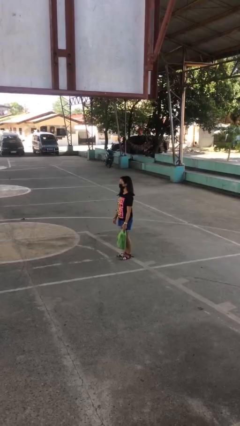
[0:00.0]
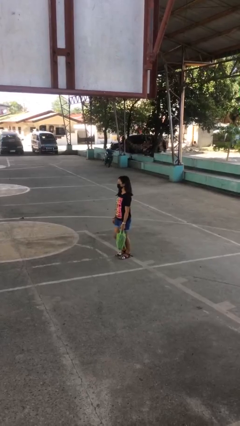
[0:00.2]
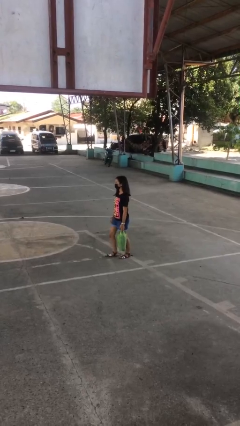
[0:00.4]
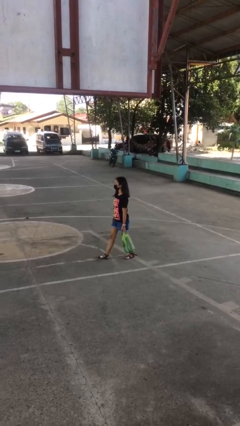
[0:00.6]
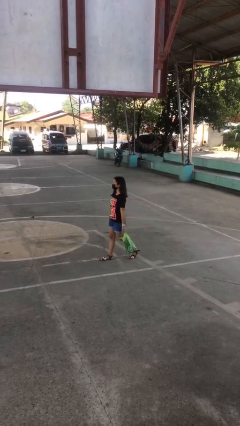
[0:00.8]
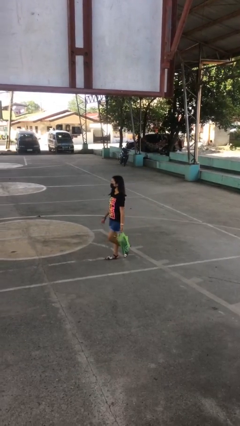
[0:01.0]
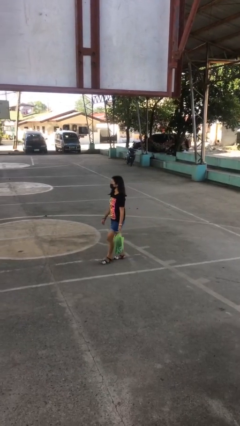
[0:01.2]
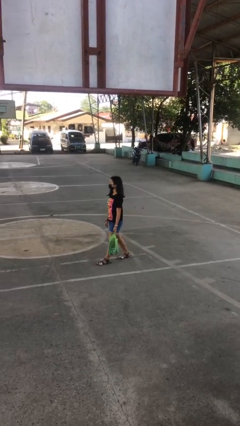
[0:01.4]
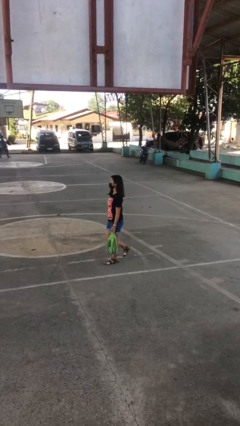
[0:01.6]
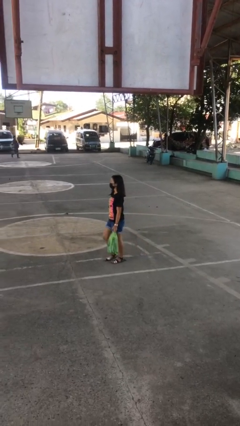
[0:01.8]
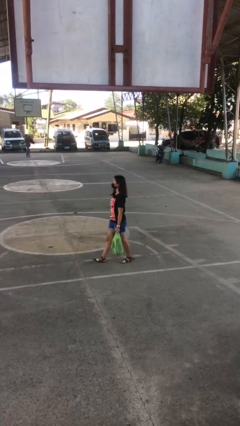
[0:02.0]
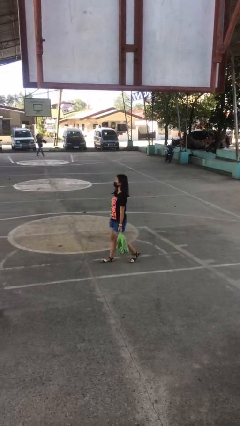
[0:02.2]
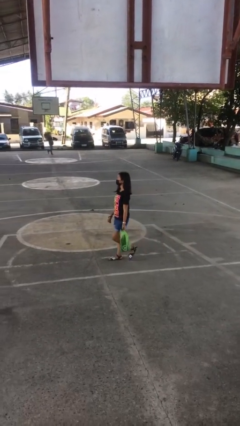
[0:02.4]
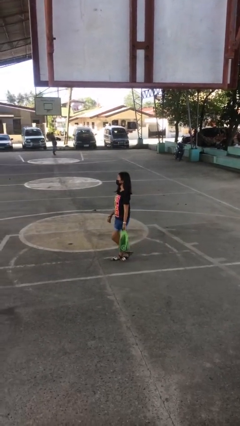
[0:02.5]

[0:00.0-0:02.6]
person carries groceries

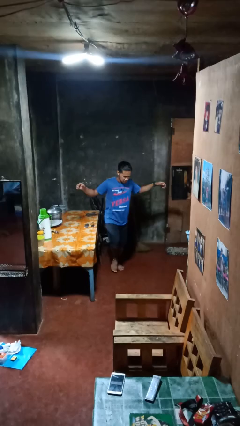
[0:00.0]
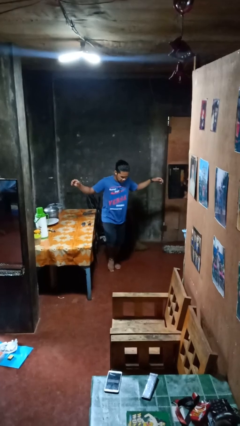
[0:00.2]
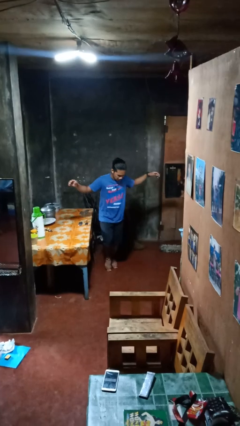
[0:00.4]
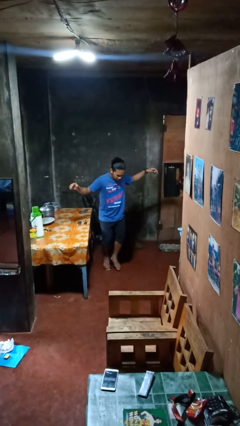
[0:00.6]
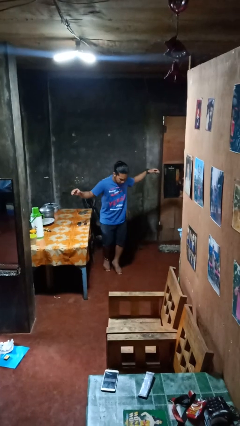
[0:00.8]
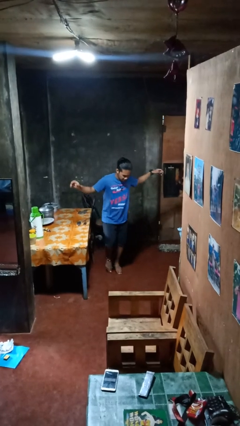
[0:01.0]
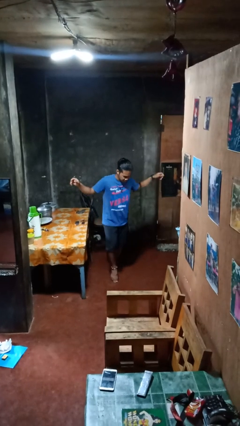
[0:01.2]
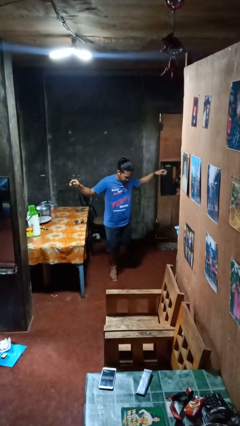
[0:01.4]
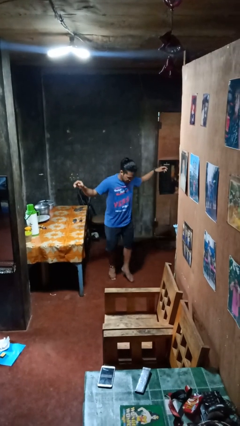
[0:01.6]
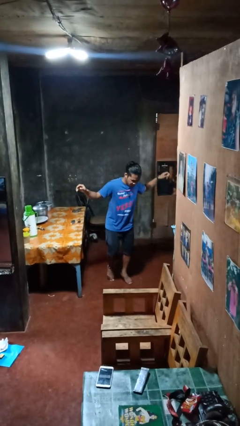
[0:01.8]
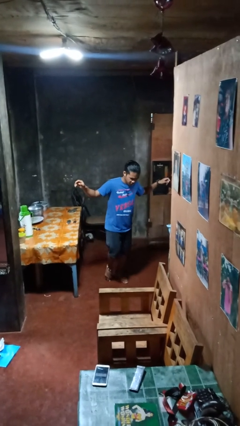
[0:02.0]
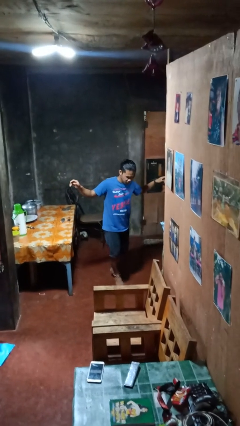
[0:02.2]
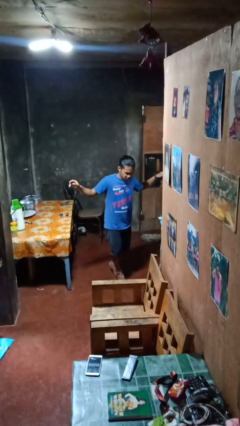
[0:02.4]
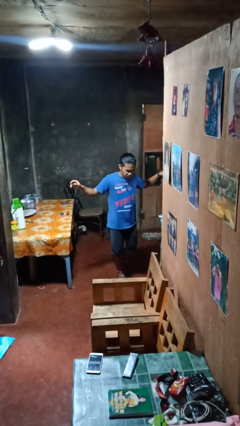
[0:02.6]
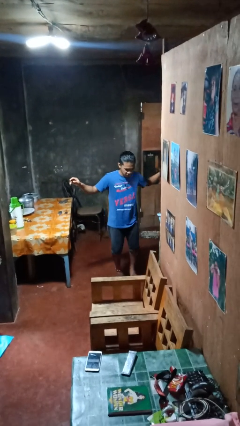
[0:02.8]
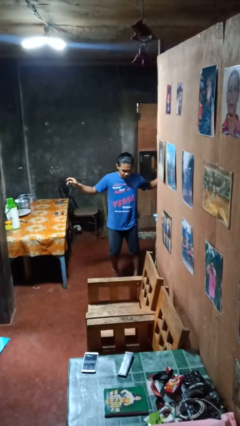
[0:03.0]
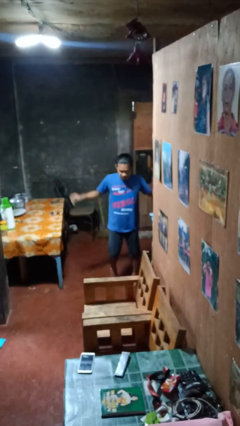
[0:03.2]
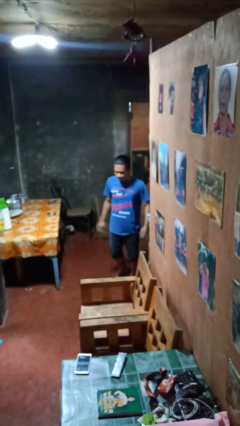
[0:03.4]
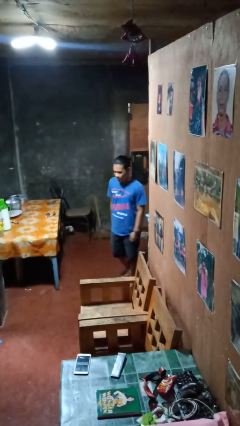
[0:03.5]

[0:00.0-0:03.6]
person walks tiptoe

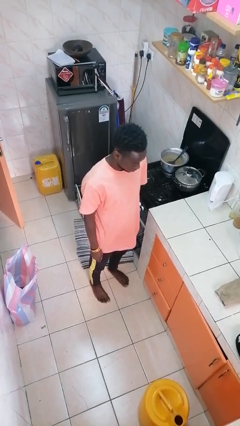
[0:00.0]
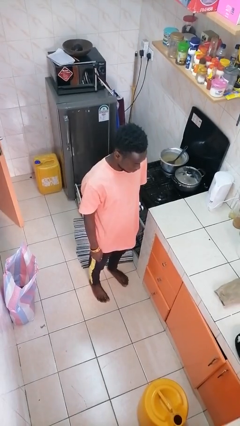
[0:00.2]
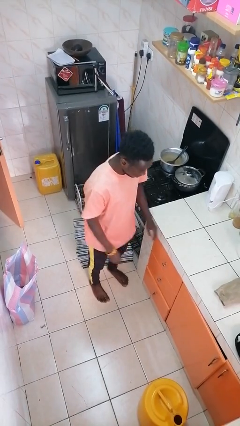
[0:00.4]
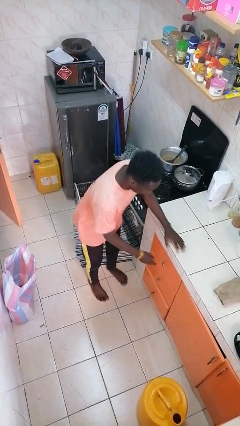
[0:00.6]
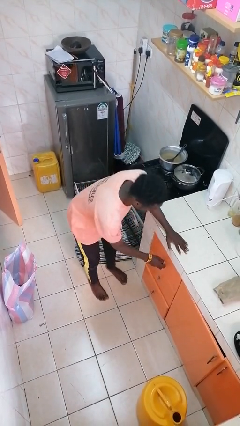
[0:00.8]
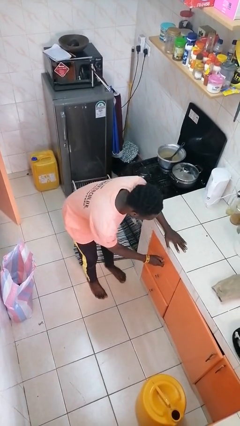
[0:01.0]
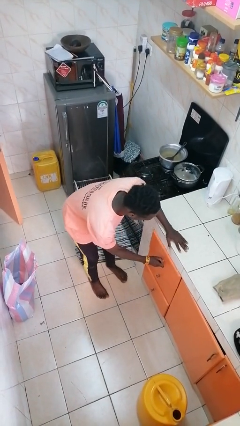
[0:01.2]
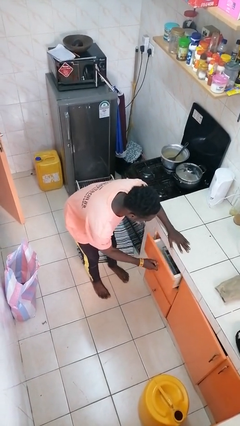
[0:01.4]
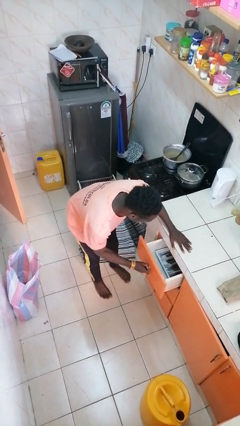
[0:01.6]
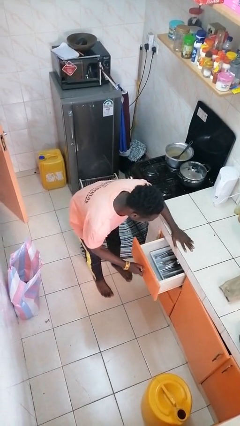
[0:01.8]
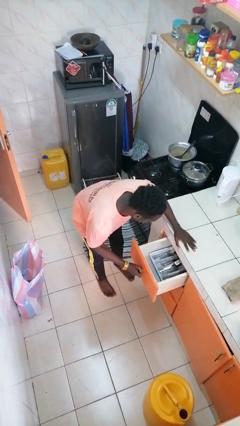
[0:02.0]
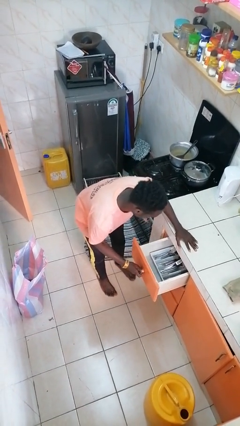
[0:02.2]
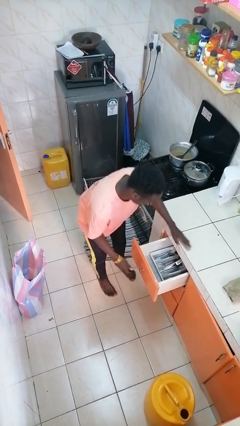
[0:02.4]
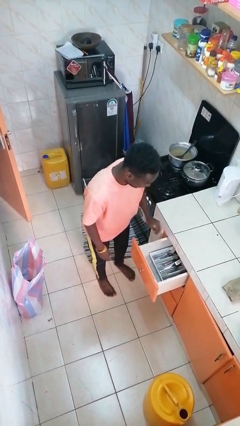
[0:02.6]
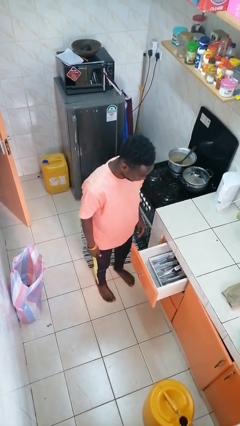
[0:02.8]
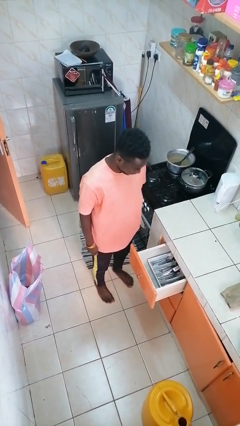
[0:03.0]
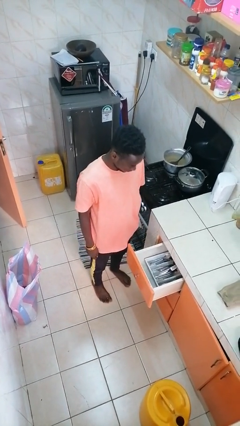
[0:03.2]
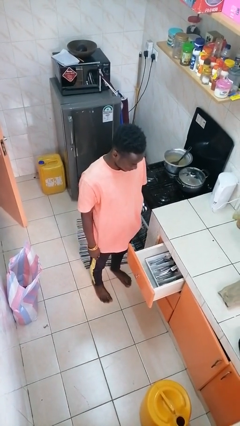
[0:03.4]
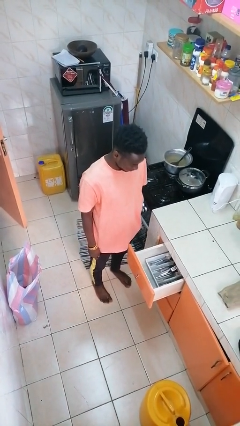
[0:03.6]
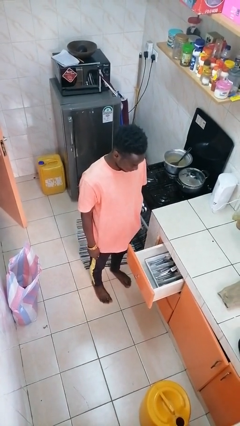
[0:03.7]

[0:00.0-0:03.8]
person opens kitchen drawer

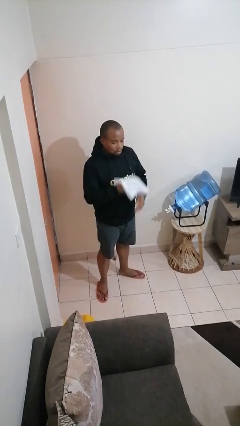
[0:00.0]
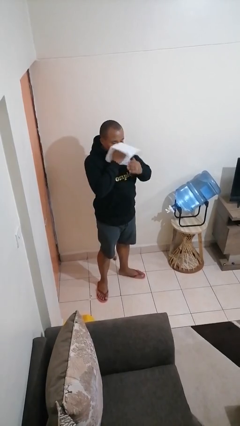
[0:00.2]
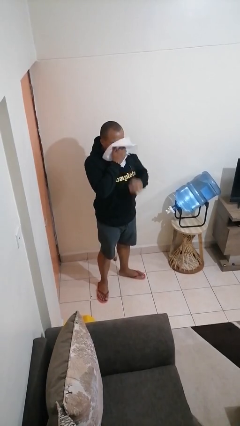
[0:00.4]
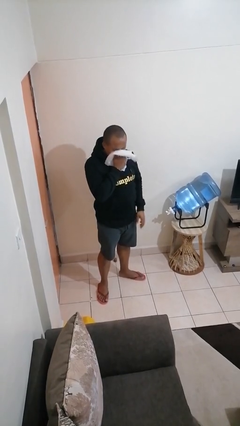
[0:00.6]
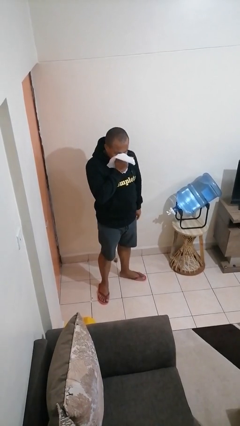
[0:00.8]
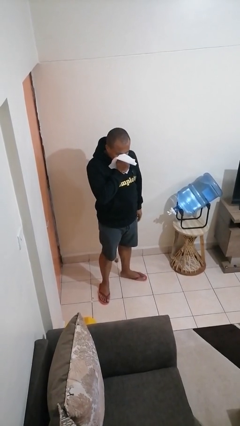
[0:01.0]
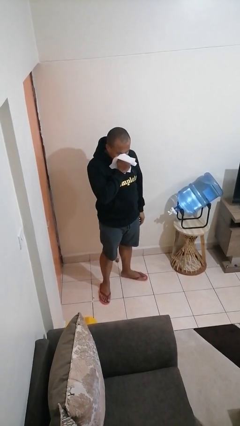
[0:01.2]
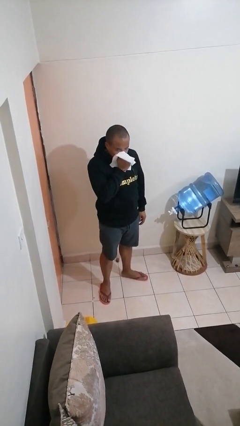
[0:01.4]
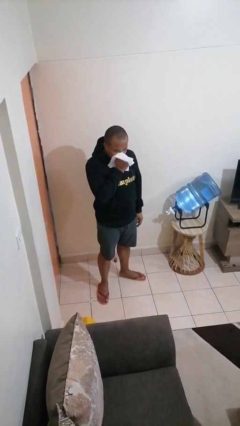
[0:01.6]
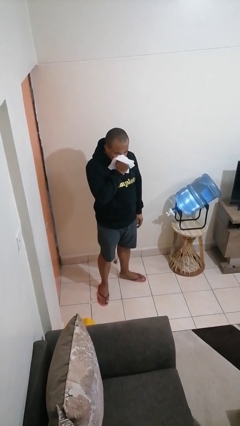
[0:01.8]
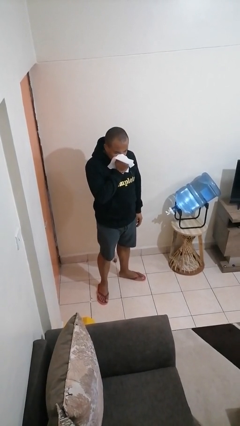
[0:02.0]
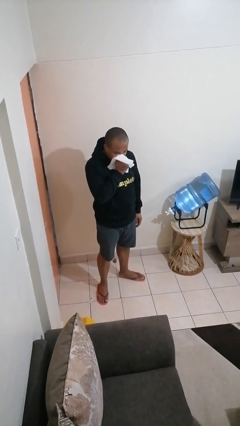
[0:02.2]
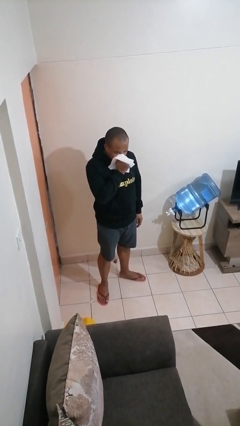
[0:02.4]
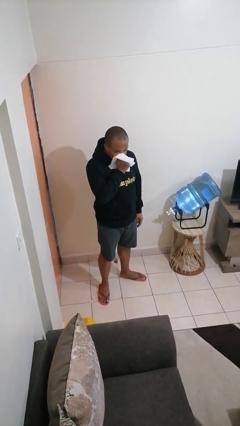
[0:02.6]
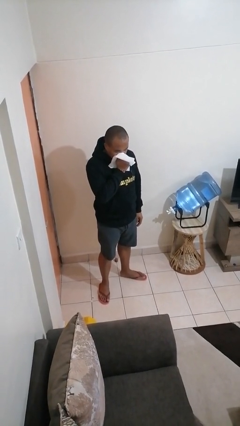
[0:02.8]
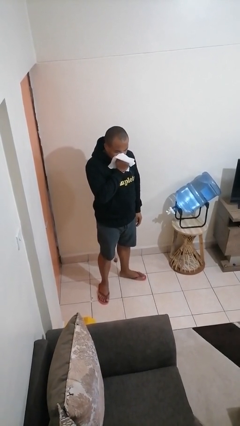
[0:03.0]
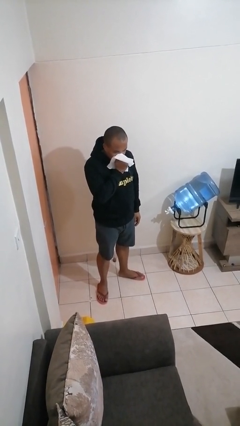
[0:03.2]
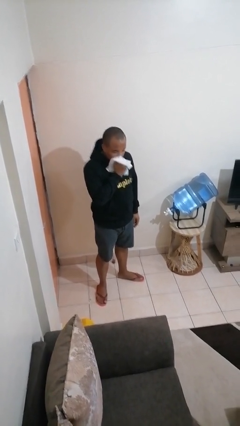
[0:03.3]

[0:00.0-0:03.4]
person blows nose

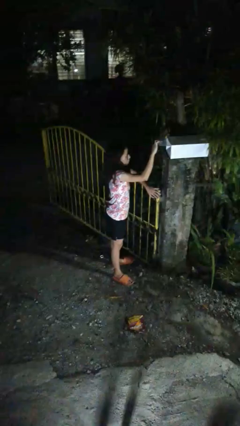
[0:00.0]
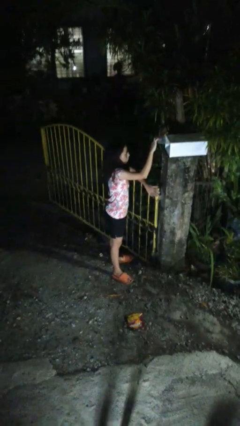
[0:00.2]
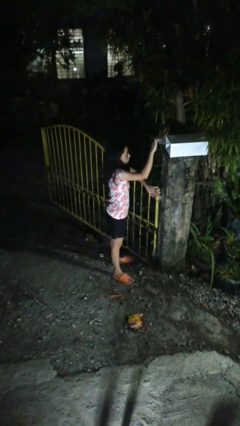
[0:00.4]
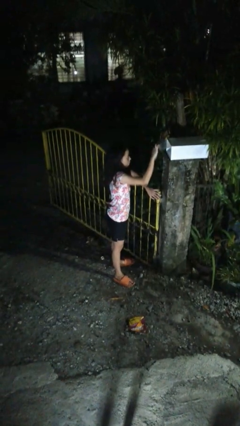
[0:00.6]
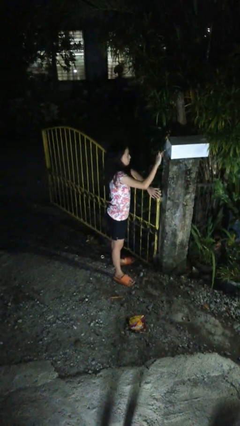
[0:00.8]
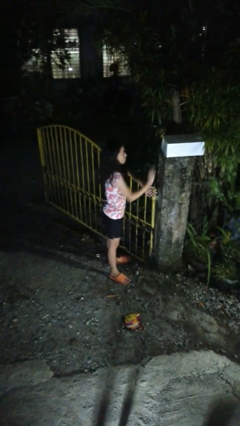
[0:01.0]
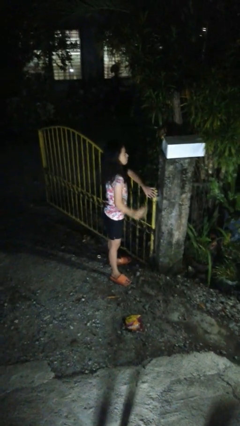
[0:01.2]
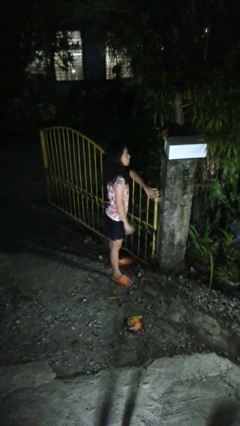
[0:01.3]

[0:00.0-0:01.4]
person closes mailbox

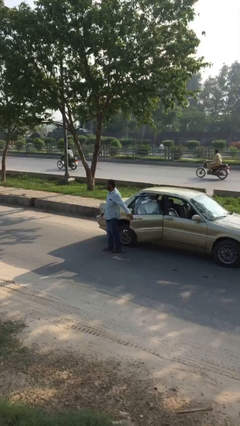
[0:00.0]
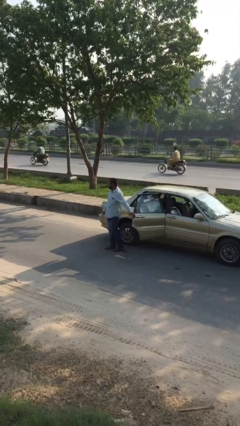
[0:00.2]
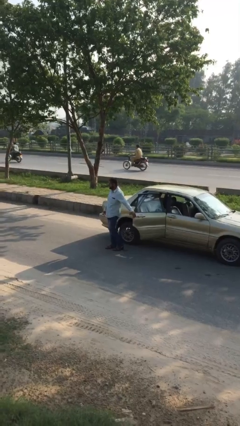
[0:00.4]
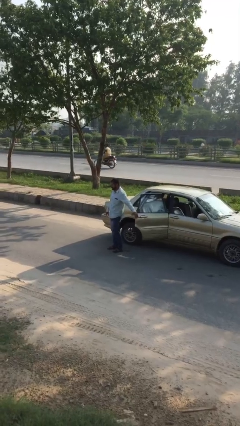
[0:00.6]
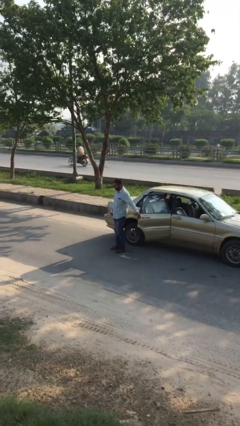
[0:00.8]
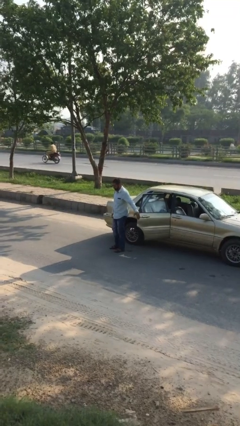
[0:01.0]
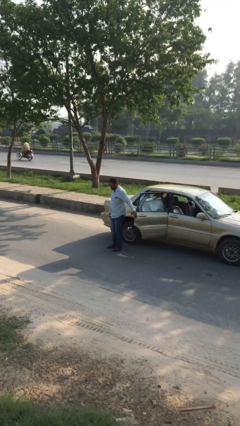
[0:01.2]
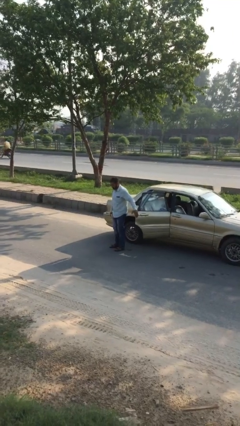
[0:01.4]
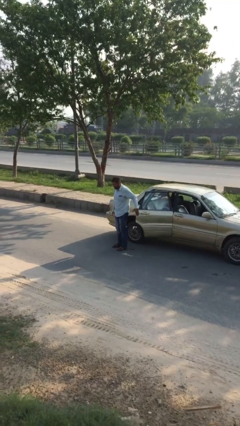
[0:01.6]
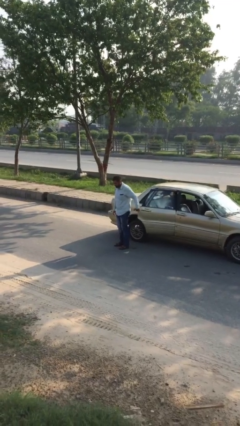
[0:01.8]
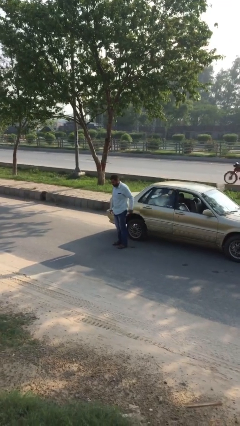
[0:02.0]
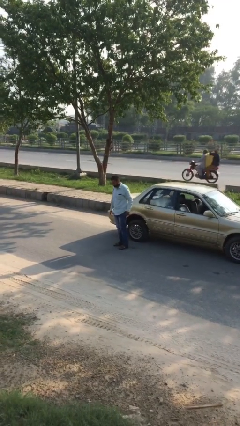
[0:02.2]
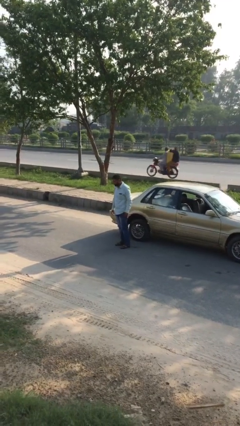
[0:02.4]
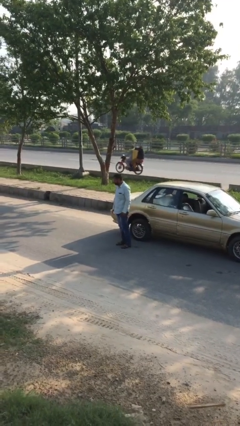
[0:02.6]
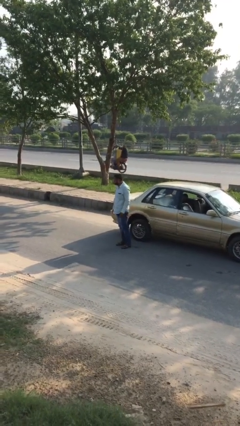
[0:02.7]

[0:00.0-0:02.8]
person closes car door
